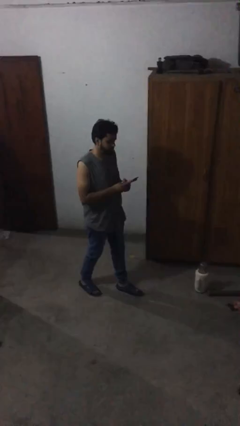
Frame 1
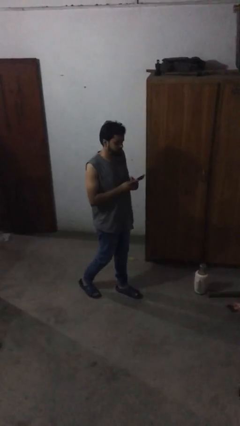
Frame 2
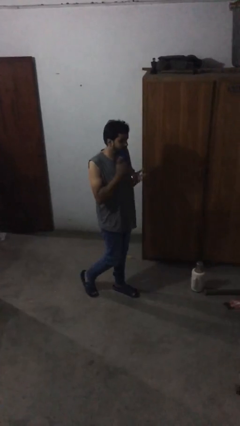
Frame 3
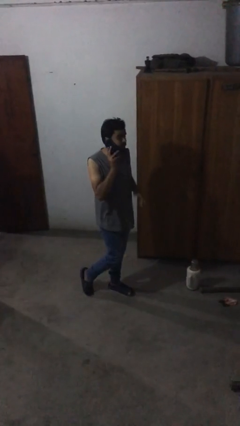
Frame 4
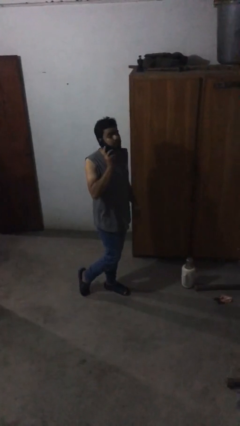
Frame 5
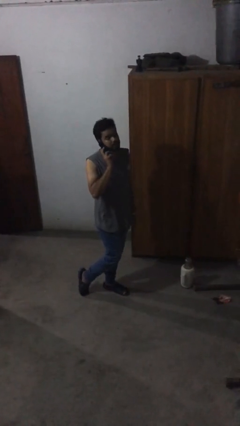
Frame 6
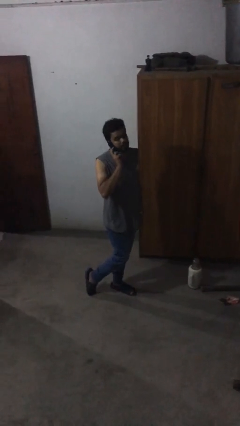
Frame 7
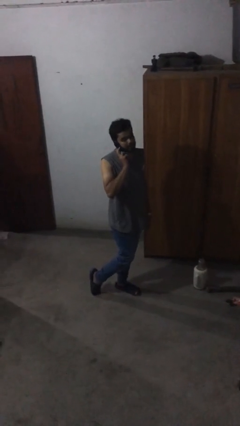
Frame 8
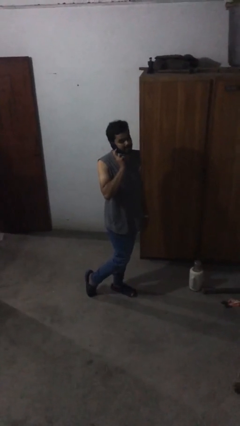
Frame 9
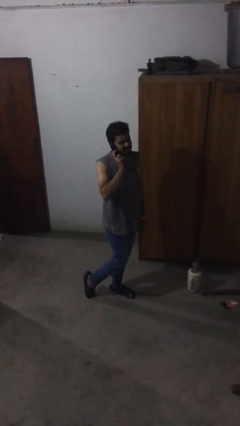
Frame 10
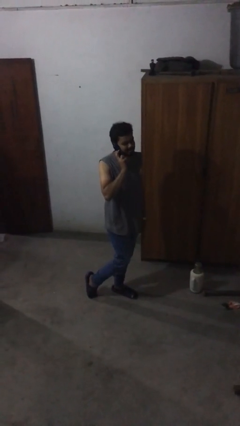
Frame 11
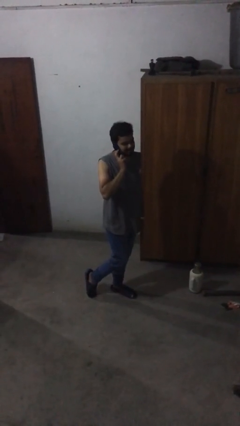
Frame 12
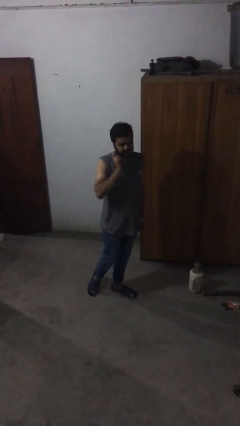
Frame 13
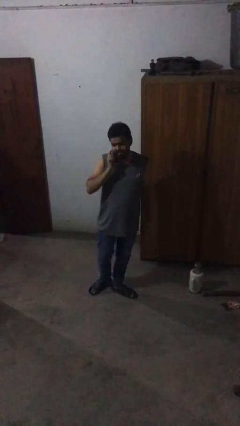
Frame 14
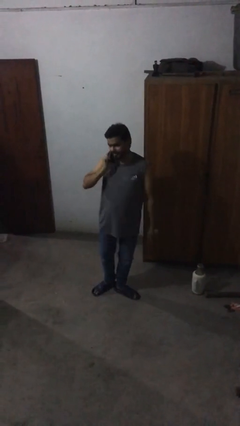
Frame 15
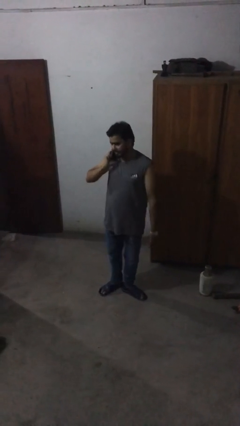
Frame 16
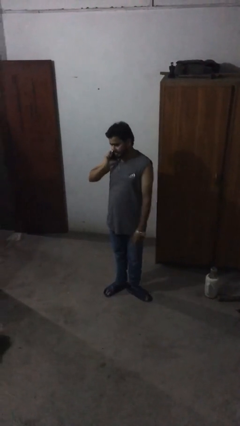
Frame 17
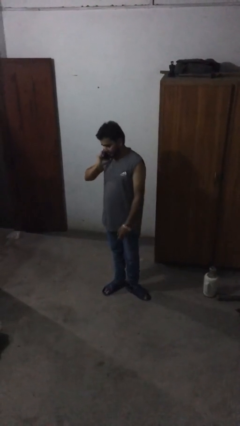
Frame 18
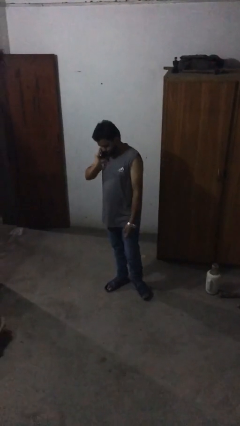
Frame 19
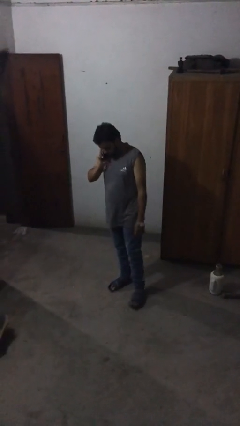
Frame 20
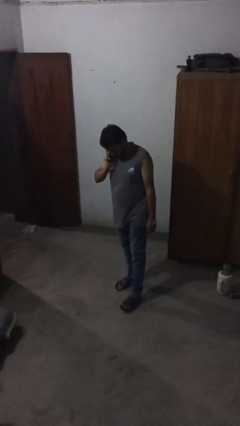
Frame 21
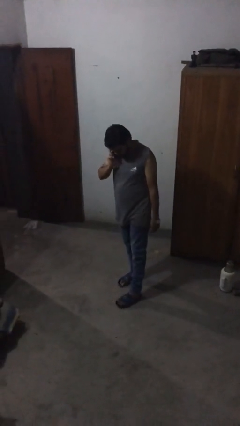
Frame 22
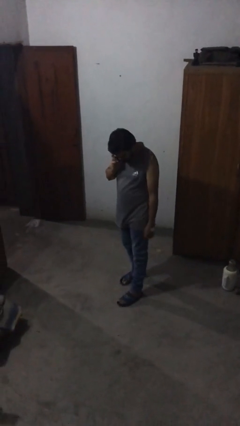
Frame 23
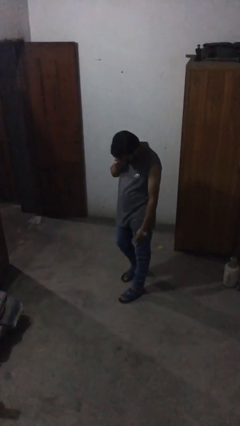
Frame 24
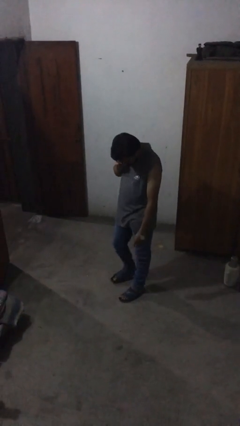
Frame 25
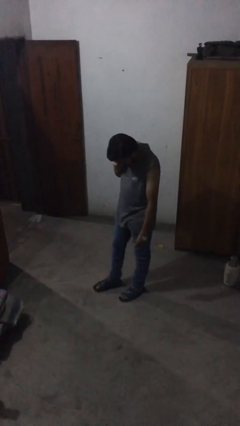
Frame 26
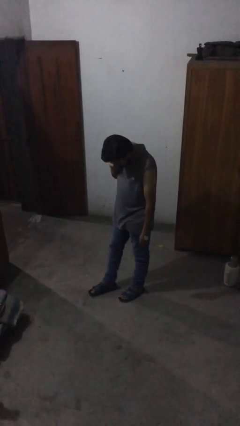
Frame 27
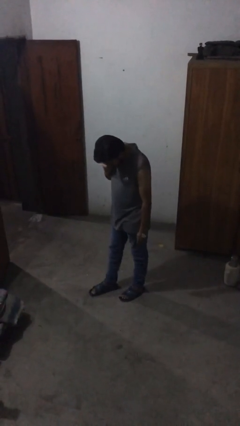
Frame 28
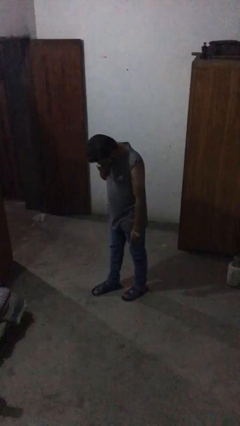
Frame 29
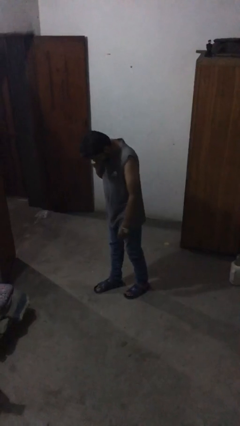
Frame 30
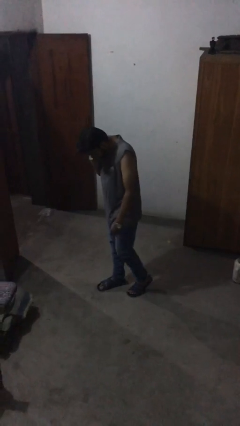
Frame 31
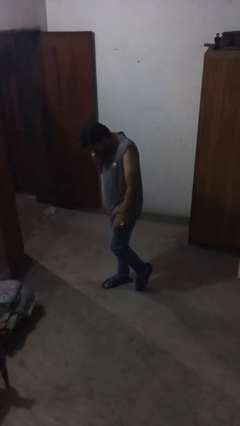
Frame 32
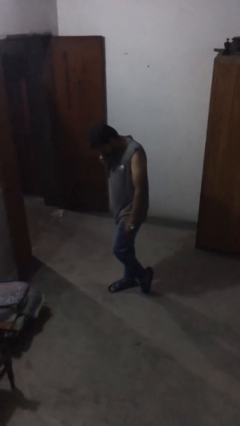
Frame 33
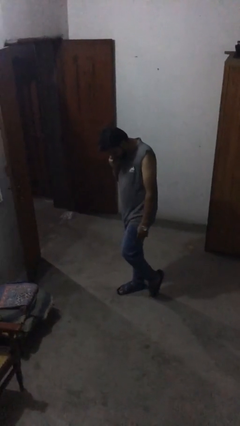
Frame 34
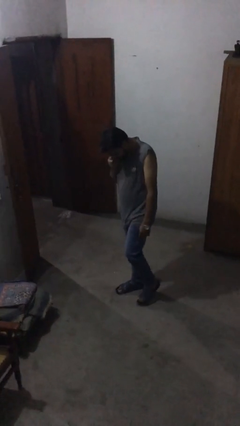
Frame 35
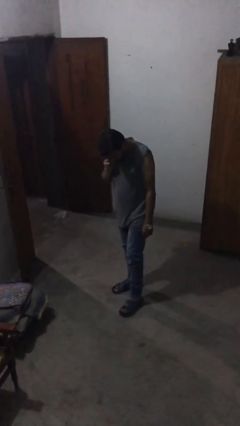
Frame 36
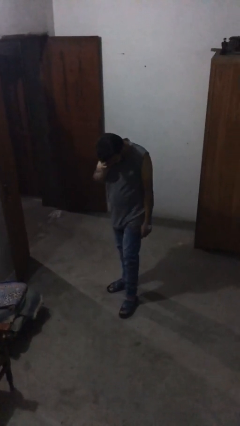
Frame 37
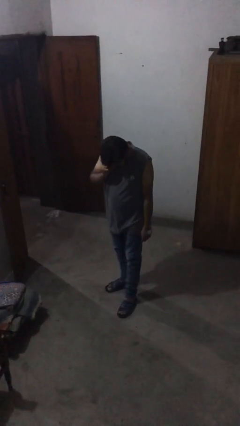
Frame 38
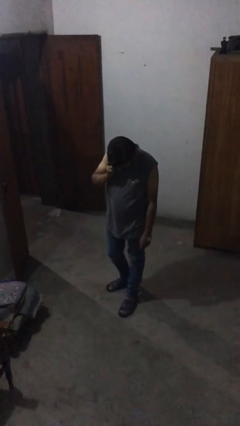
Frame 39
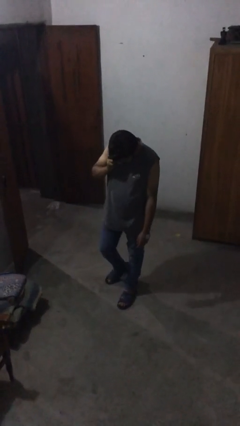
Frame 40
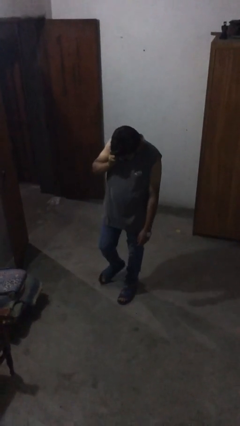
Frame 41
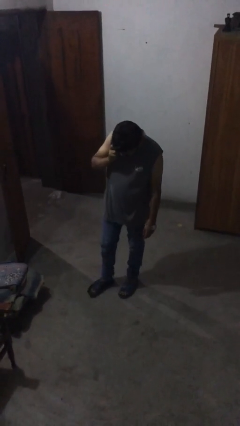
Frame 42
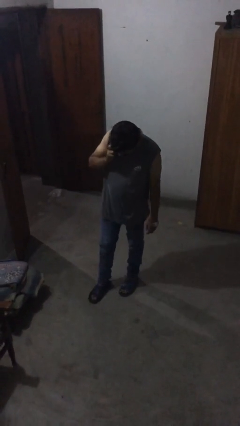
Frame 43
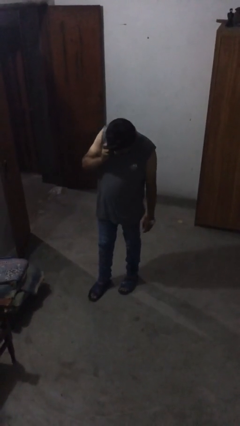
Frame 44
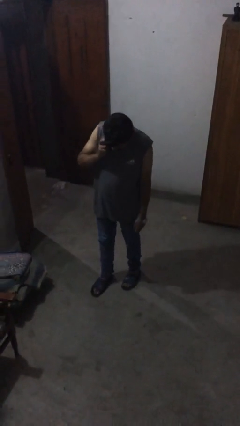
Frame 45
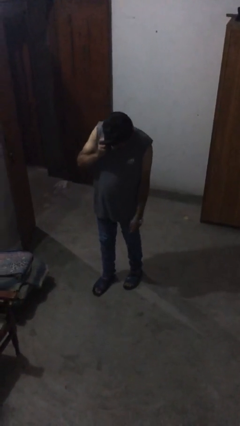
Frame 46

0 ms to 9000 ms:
person talks on phone

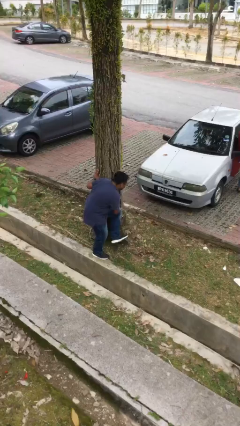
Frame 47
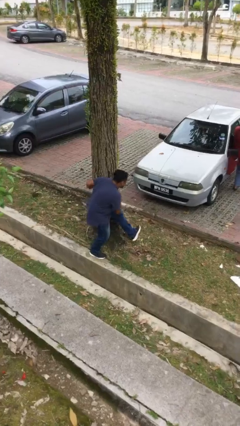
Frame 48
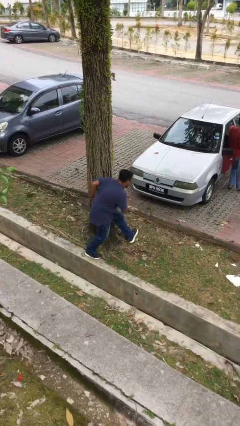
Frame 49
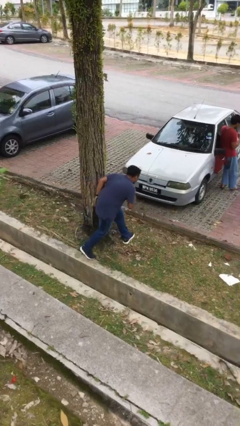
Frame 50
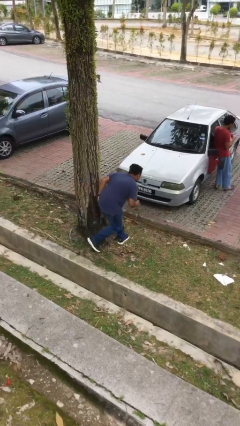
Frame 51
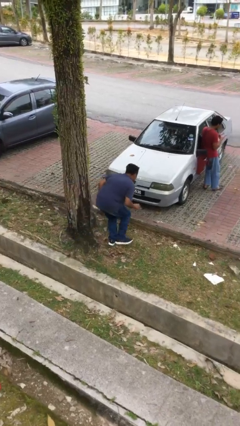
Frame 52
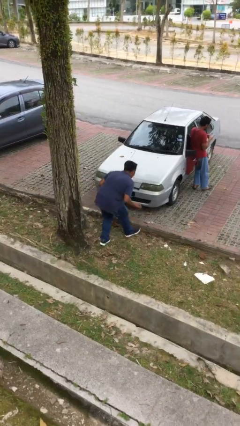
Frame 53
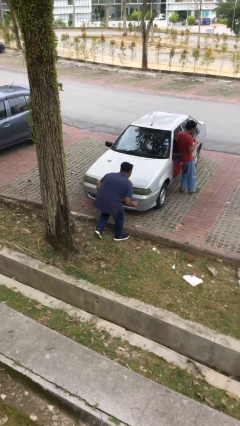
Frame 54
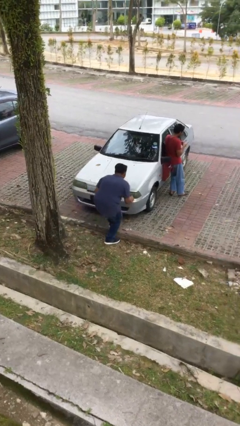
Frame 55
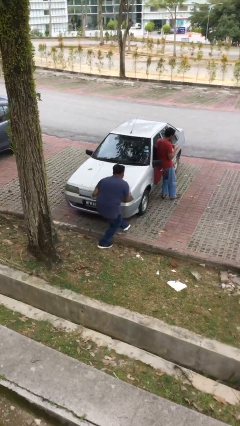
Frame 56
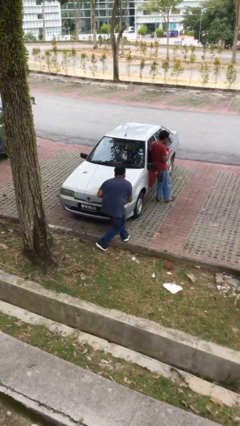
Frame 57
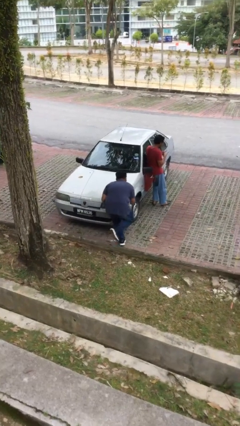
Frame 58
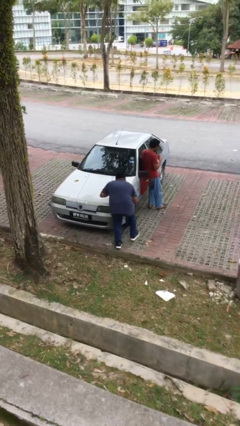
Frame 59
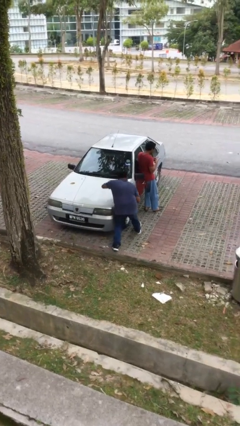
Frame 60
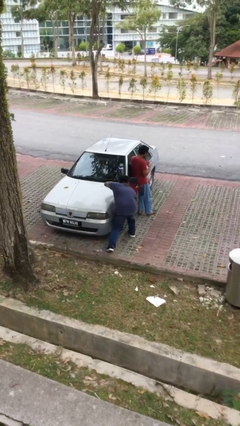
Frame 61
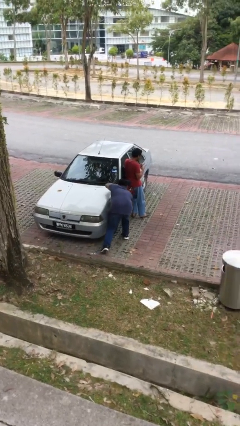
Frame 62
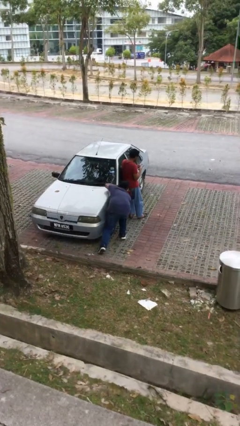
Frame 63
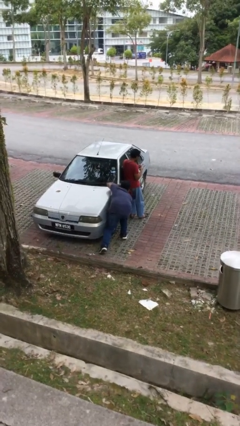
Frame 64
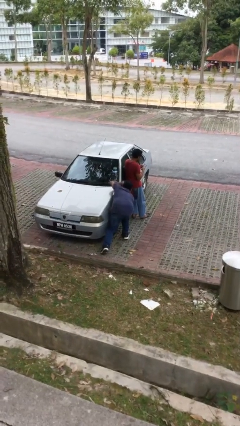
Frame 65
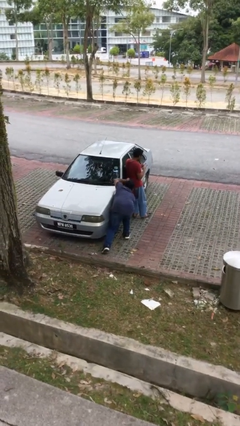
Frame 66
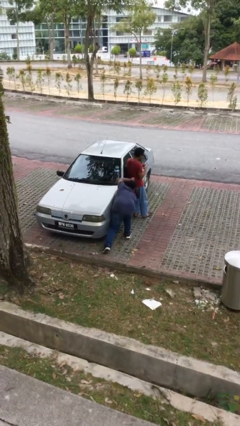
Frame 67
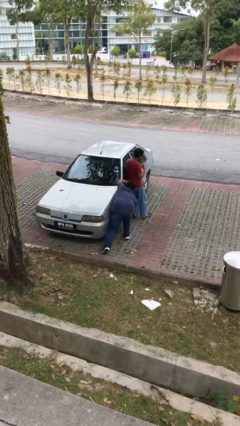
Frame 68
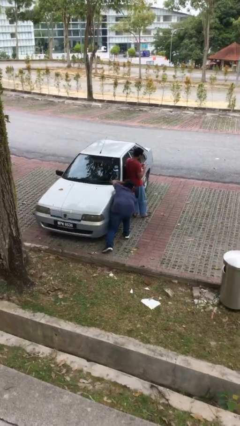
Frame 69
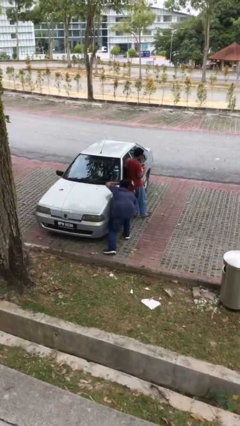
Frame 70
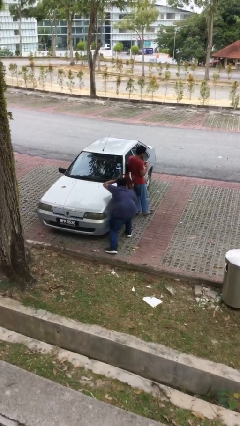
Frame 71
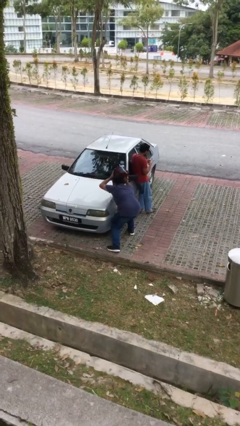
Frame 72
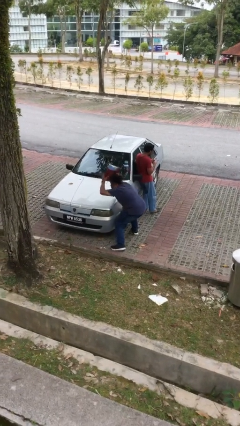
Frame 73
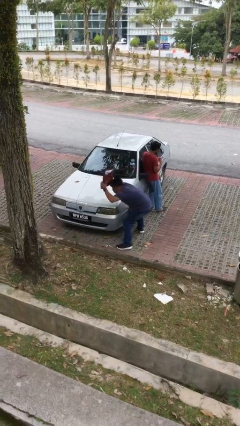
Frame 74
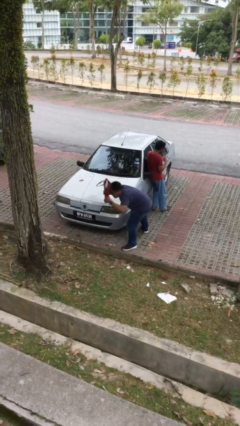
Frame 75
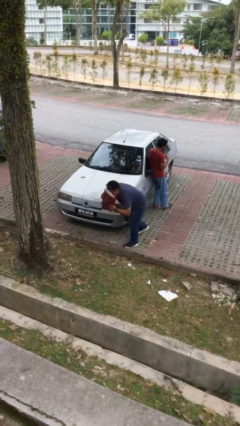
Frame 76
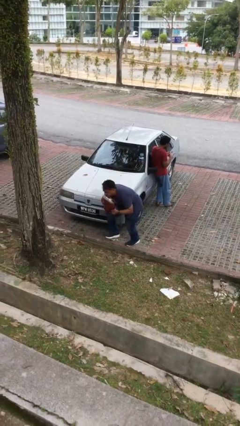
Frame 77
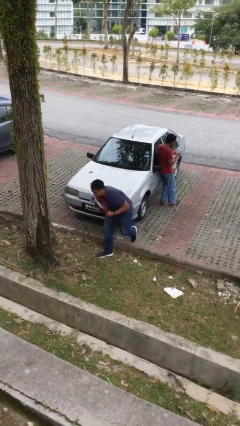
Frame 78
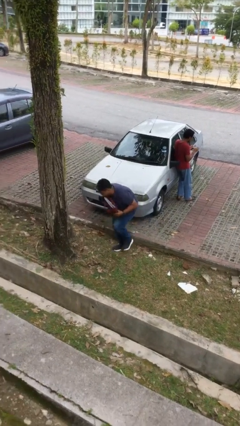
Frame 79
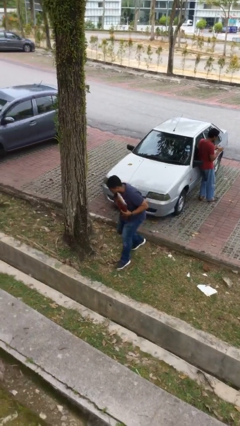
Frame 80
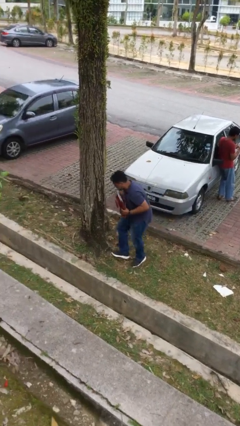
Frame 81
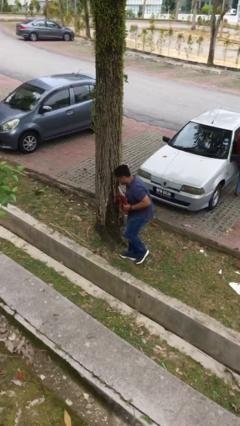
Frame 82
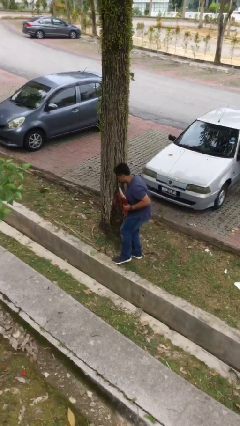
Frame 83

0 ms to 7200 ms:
person steals object from person

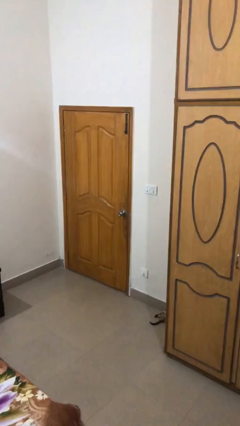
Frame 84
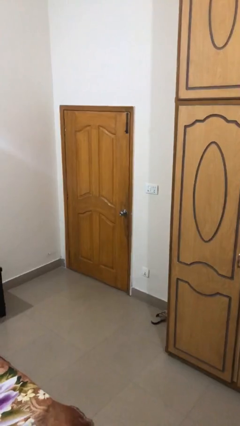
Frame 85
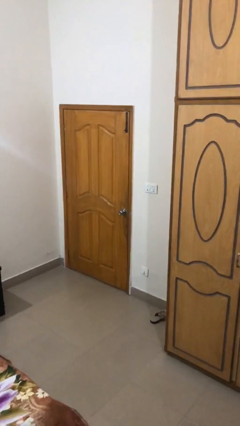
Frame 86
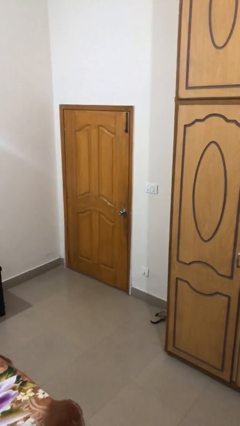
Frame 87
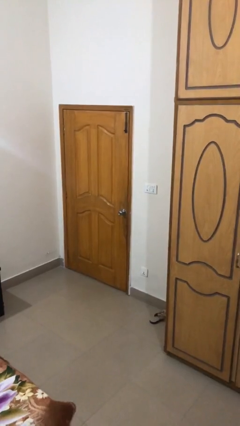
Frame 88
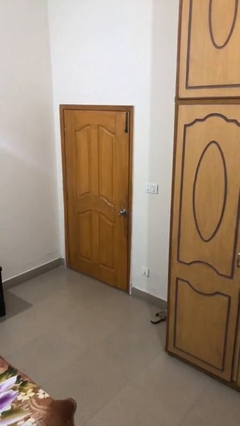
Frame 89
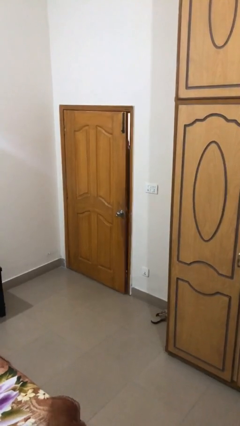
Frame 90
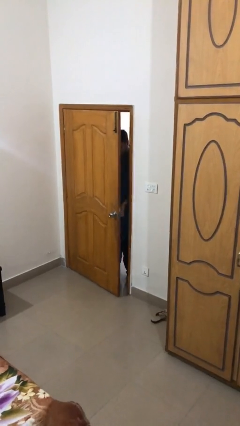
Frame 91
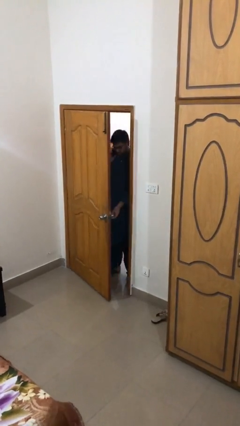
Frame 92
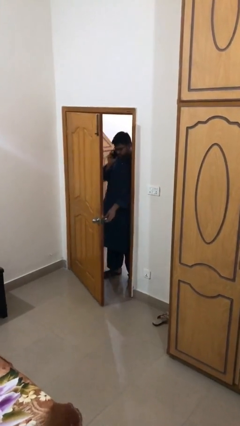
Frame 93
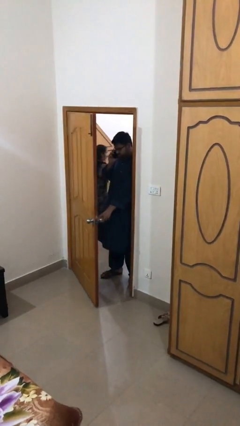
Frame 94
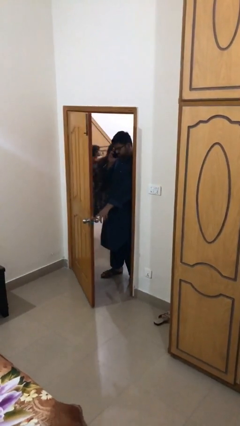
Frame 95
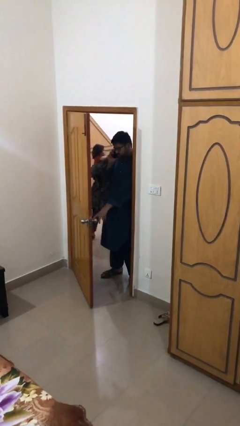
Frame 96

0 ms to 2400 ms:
person opens facility door
